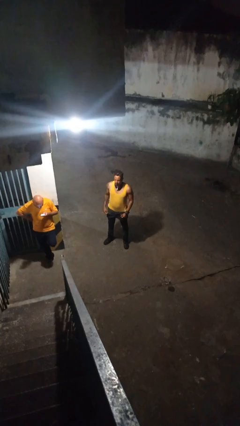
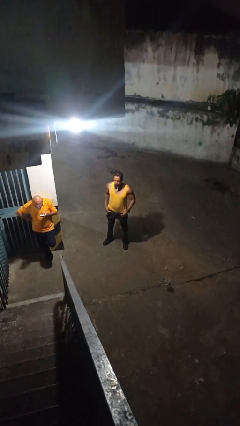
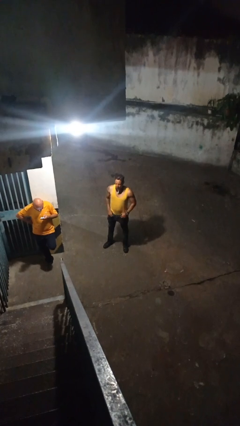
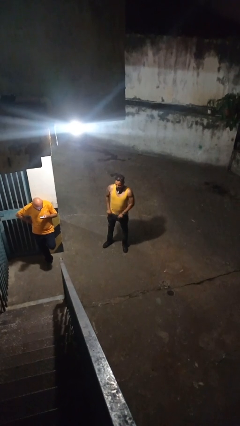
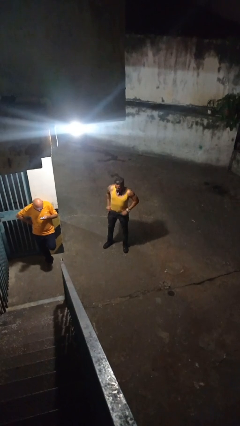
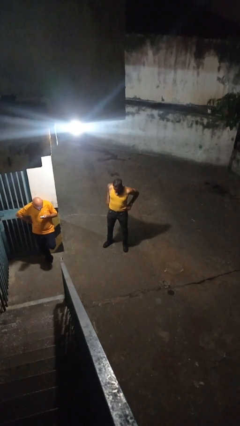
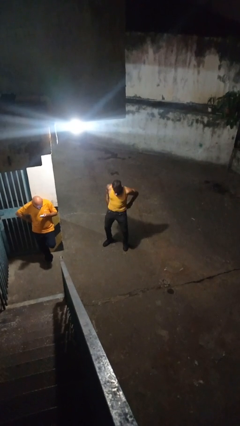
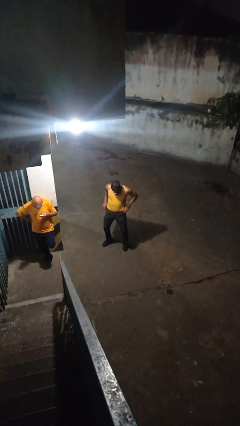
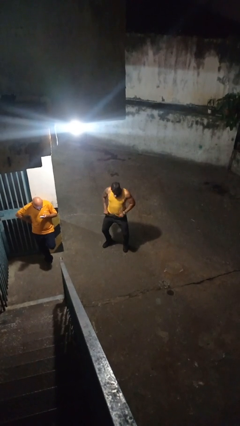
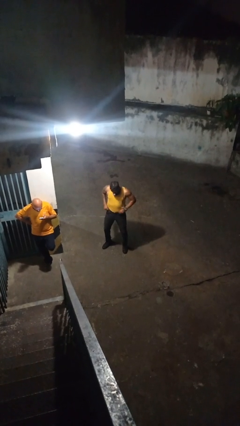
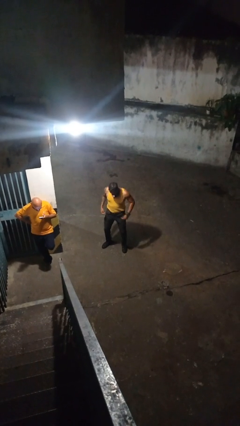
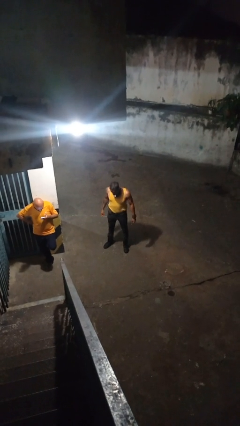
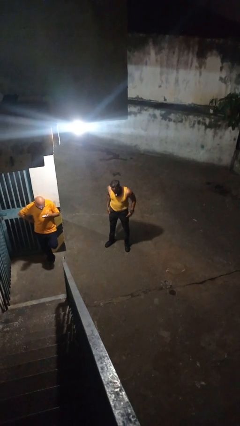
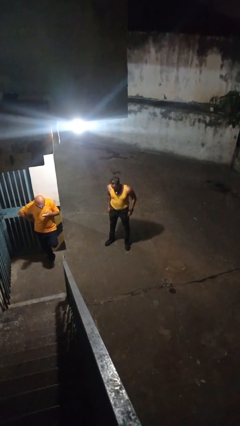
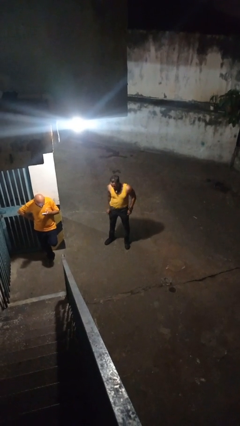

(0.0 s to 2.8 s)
person hikes up pants

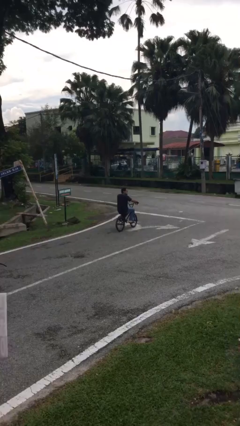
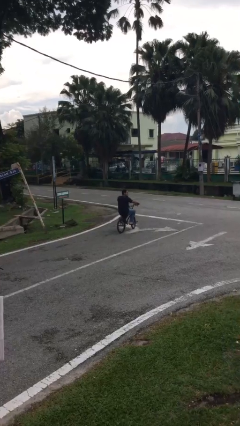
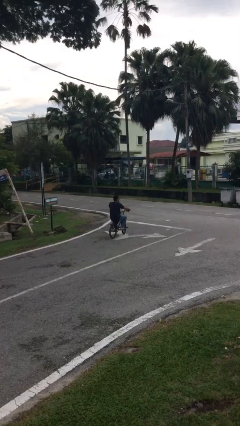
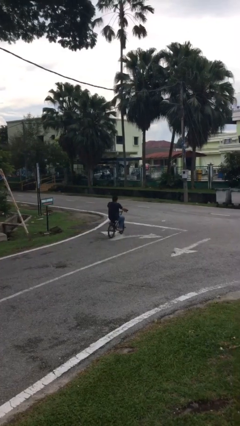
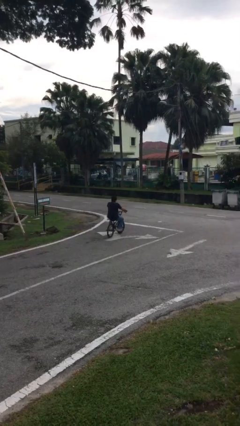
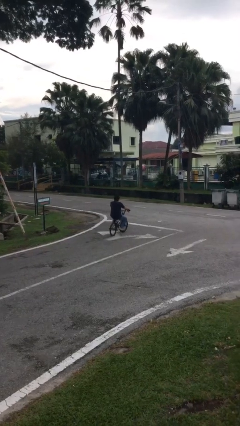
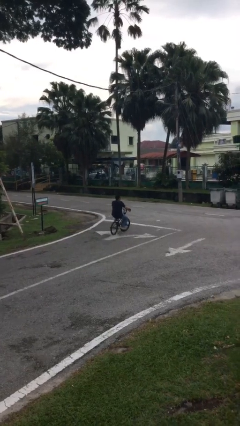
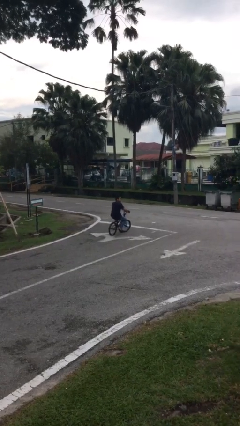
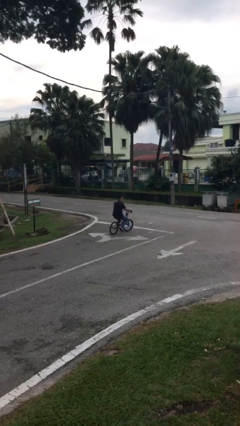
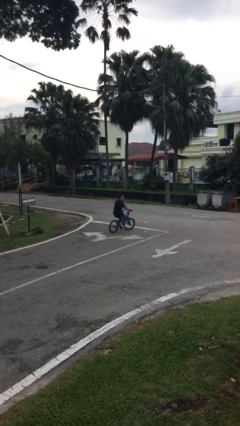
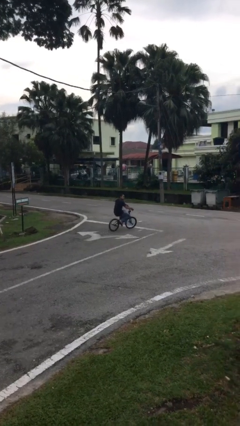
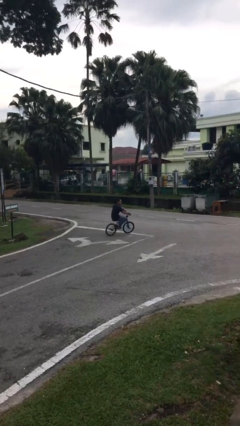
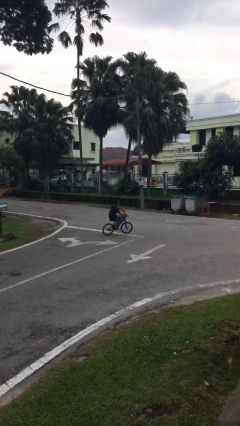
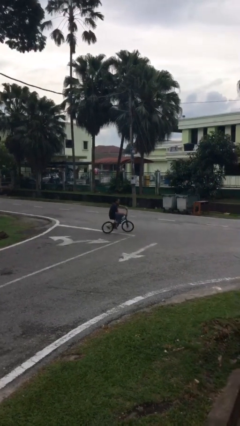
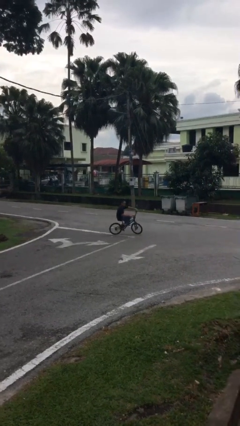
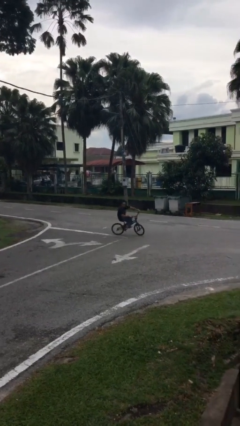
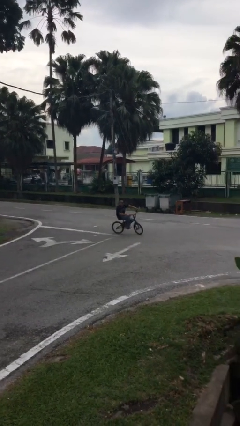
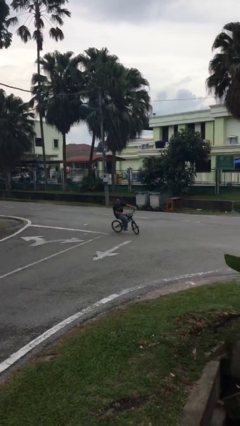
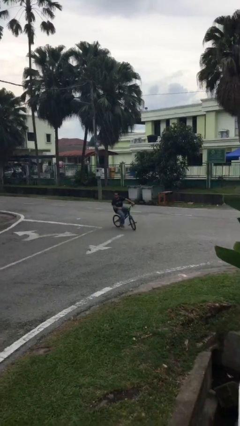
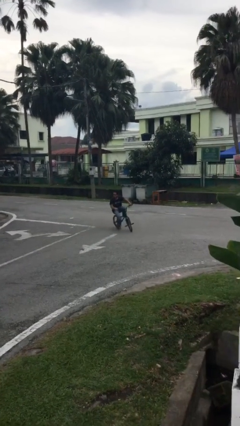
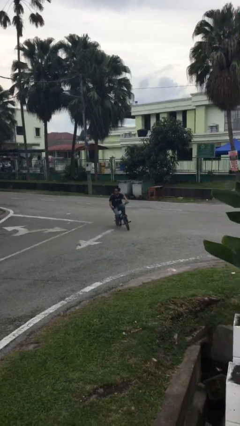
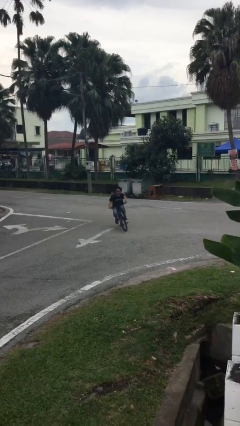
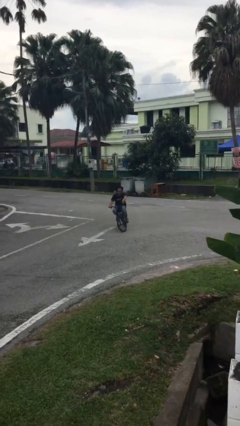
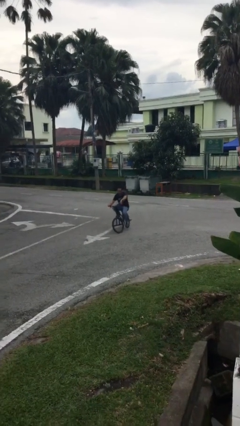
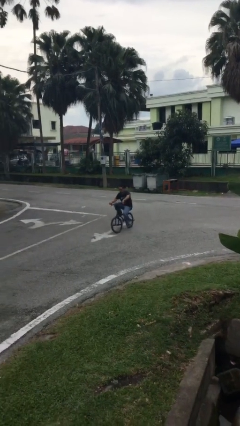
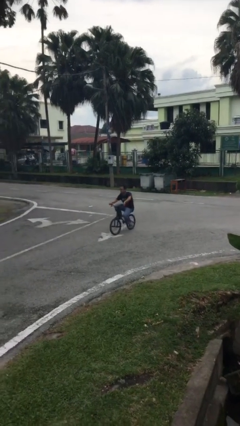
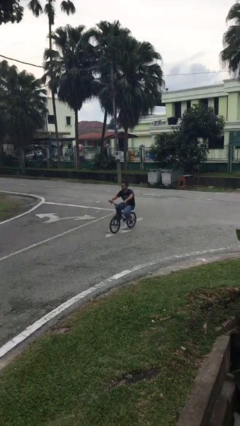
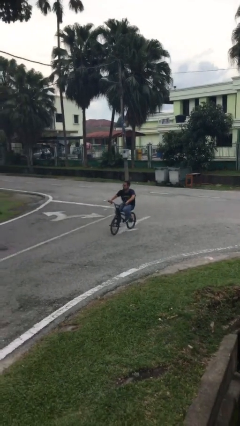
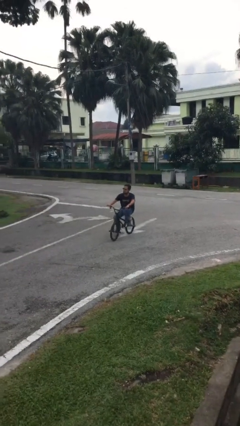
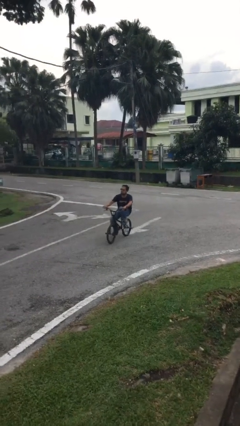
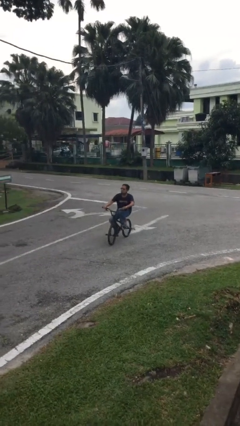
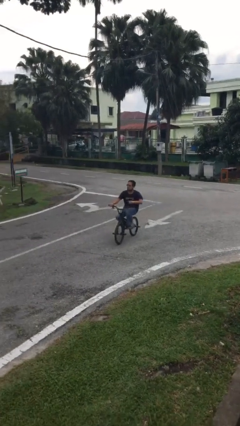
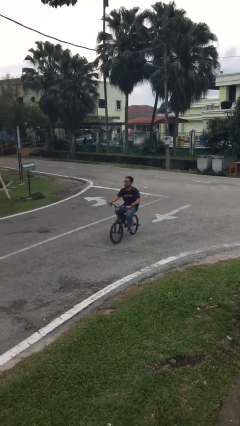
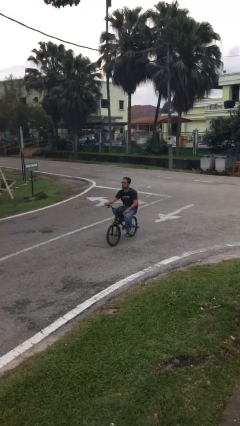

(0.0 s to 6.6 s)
person rides bicycle

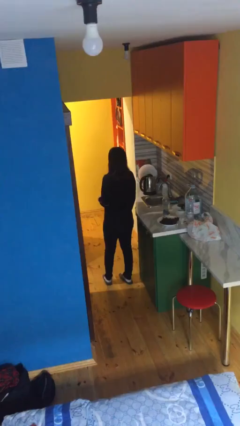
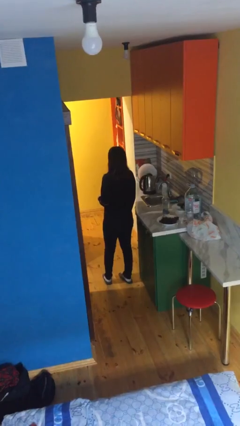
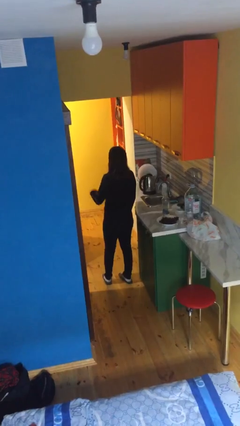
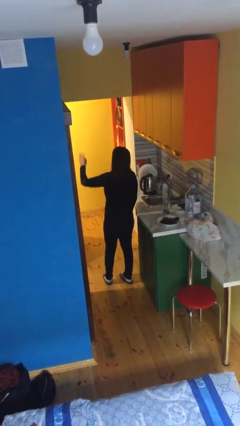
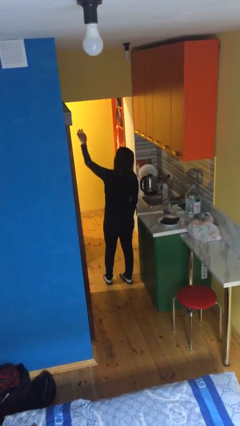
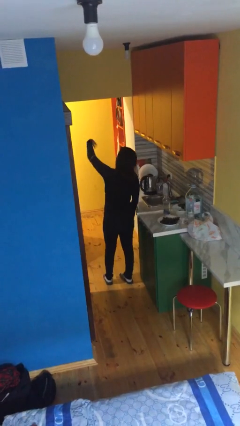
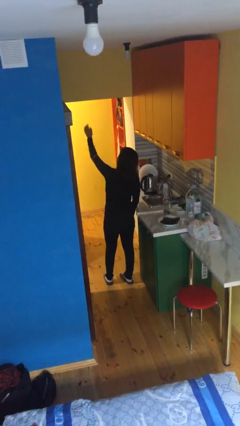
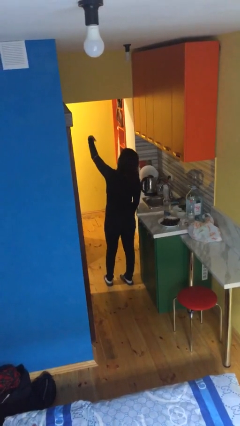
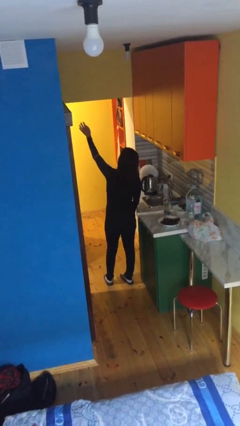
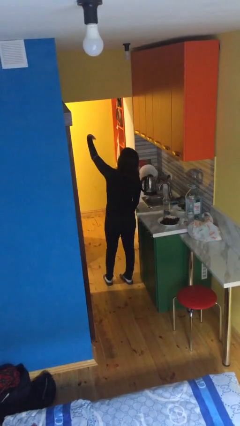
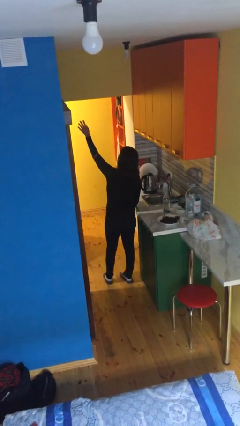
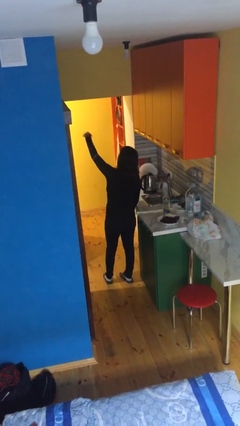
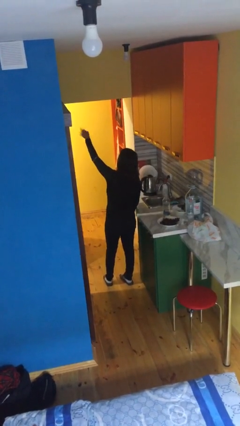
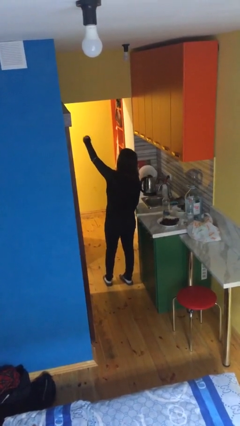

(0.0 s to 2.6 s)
person gestures come here

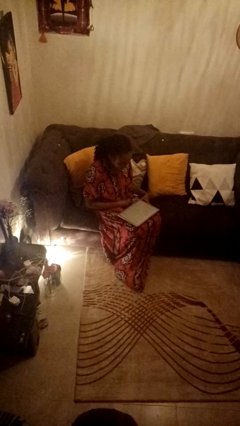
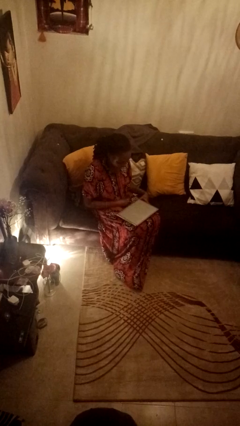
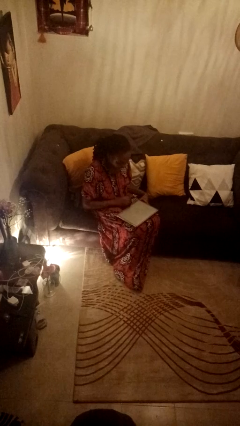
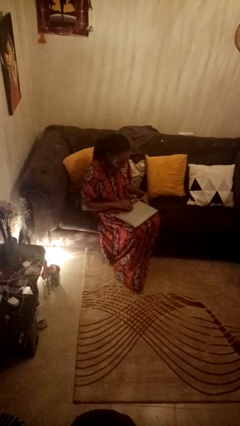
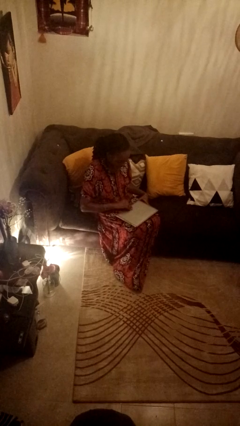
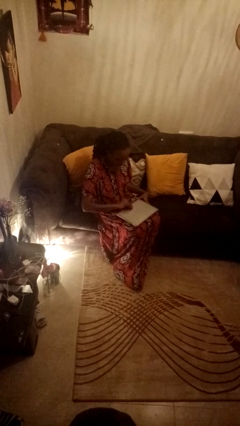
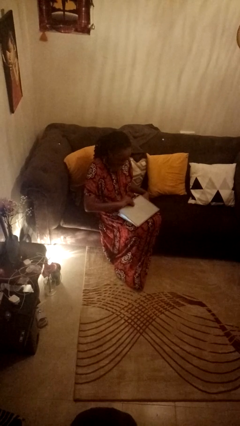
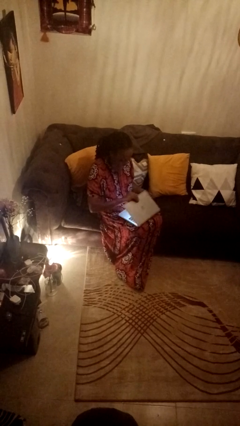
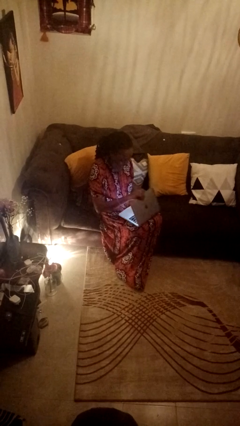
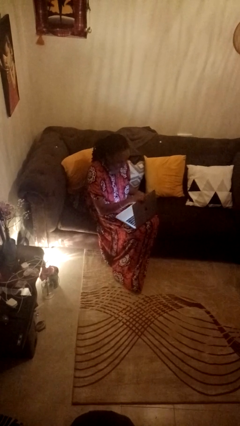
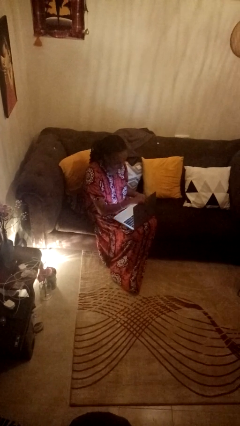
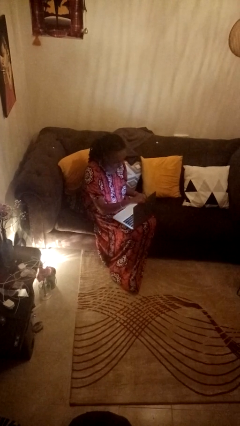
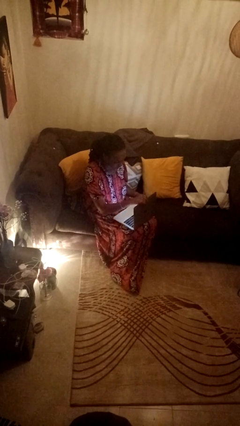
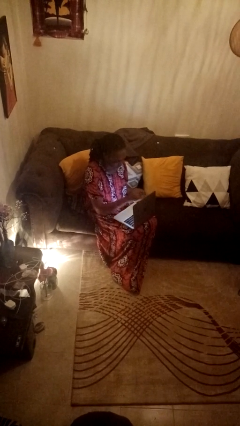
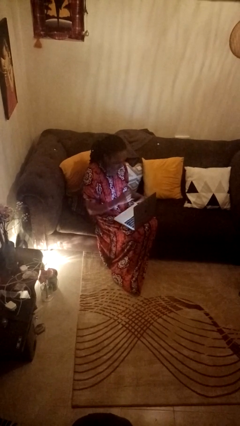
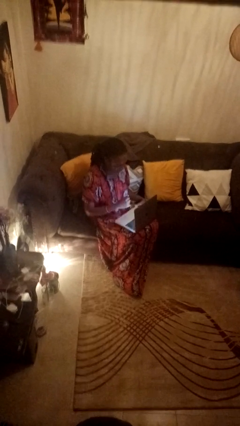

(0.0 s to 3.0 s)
person opens laptop

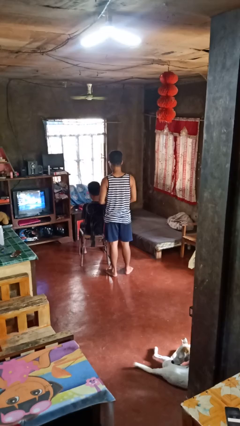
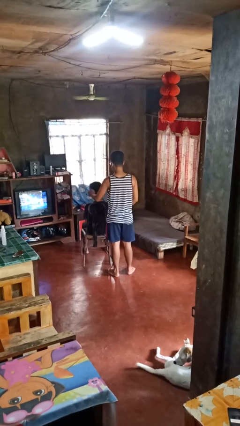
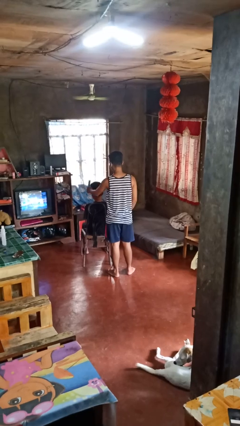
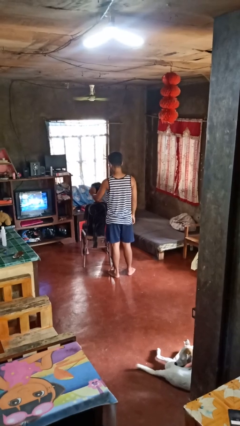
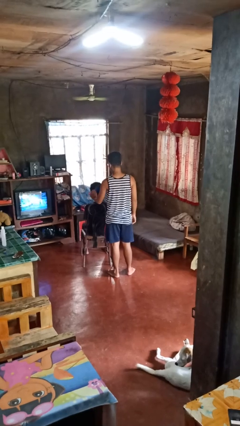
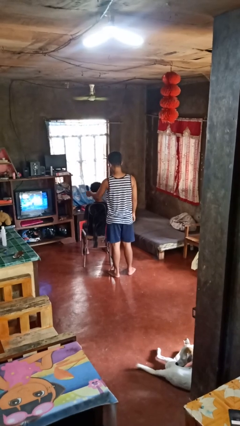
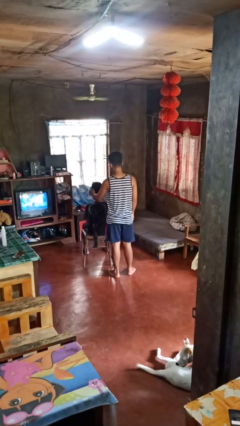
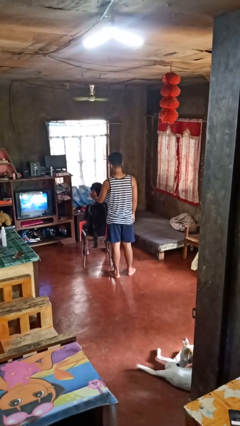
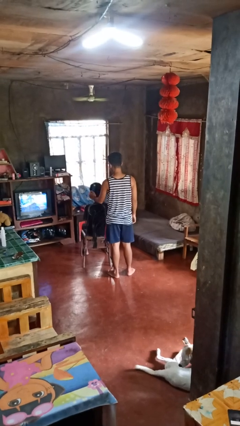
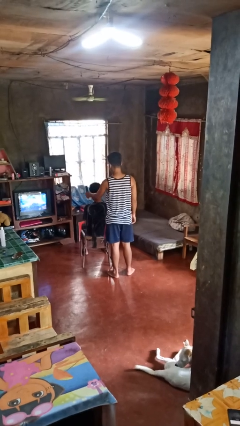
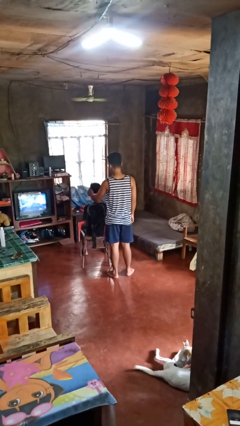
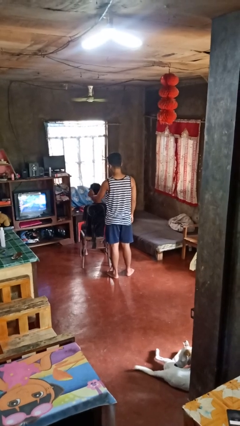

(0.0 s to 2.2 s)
person brushes hair of person

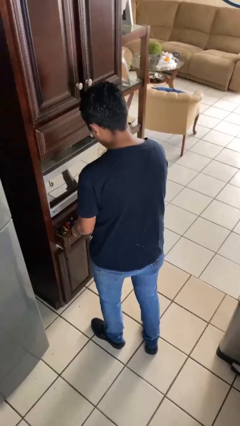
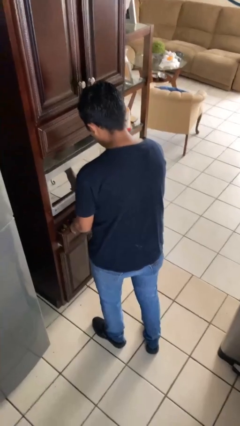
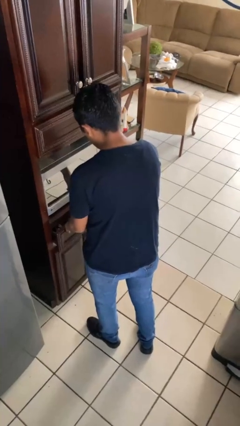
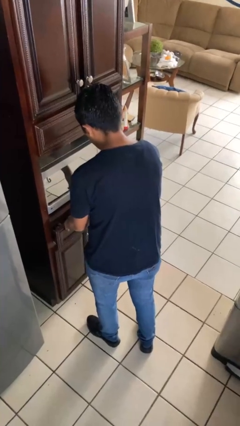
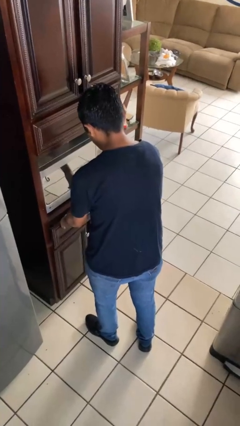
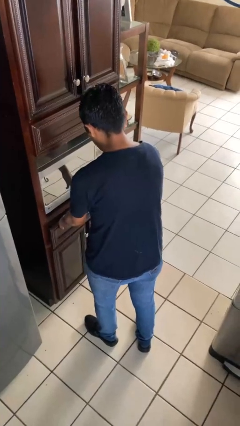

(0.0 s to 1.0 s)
person closes kitchen drawer
